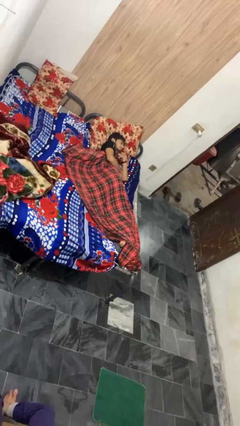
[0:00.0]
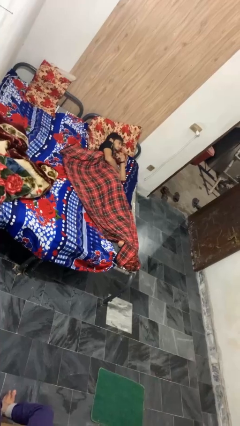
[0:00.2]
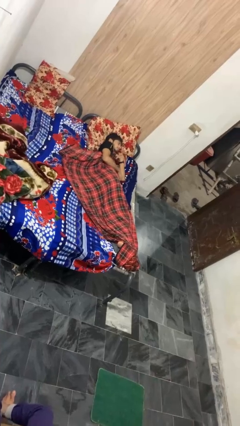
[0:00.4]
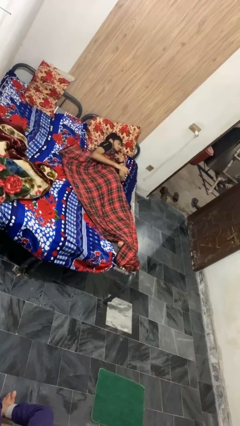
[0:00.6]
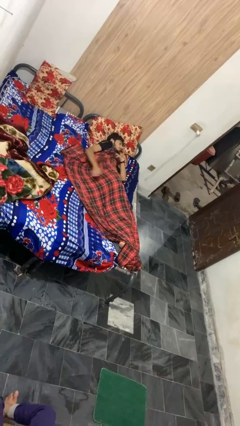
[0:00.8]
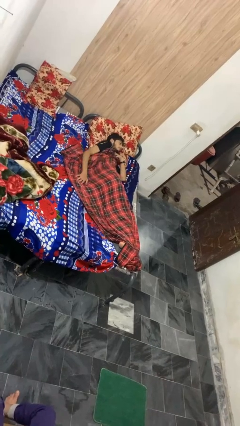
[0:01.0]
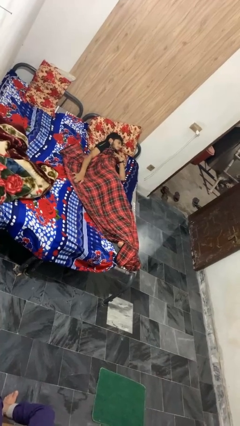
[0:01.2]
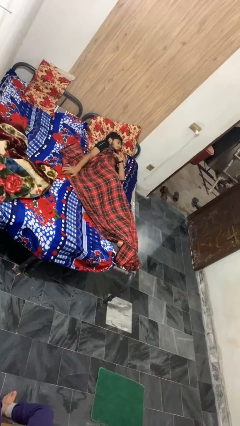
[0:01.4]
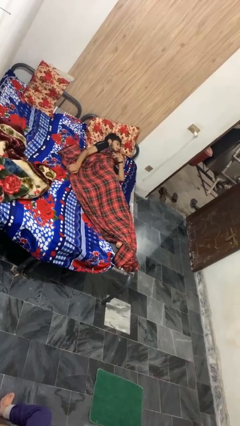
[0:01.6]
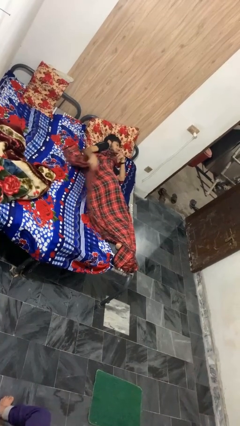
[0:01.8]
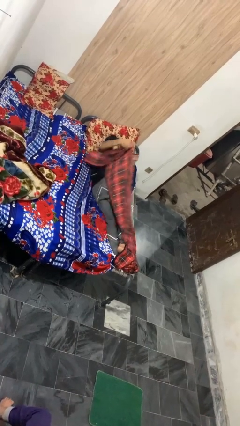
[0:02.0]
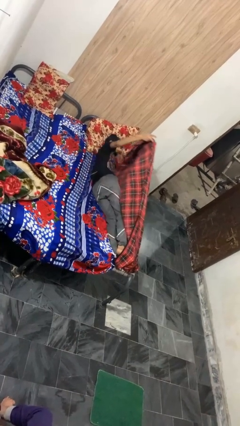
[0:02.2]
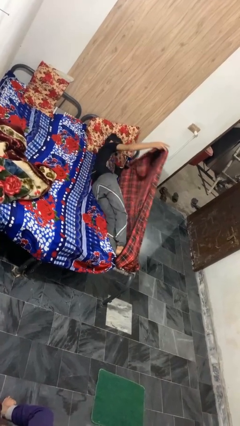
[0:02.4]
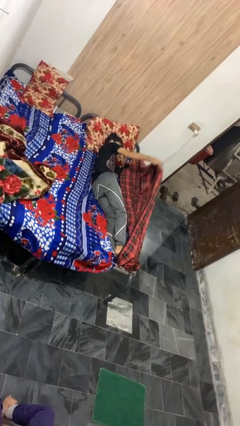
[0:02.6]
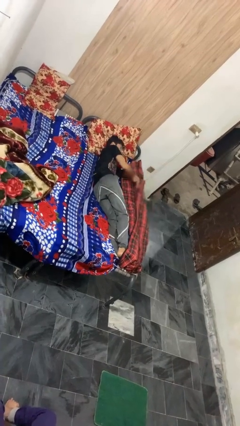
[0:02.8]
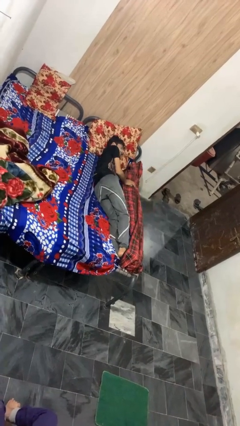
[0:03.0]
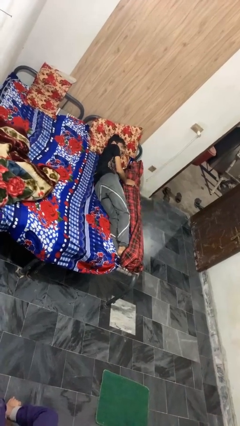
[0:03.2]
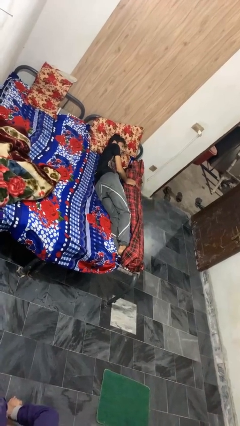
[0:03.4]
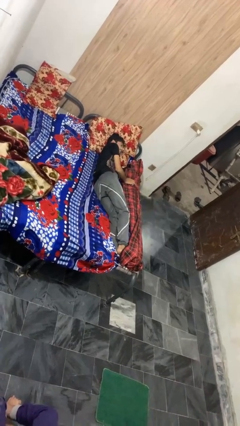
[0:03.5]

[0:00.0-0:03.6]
person uncovers with blanket

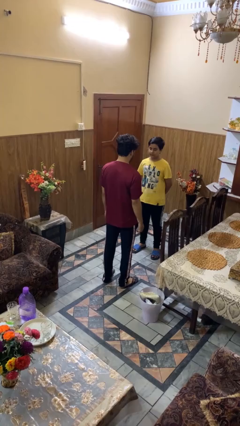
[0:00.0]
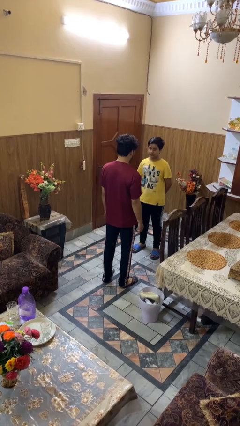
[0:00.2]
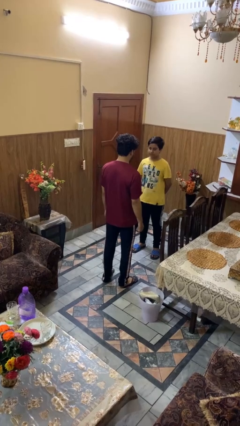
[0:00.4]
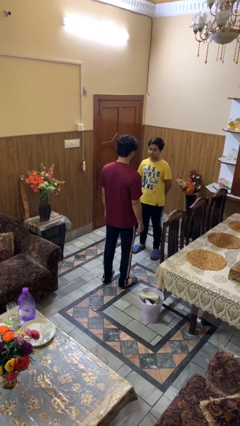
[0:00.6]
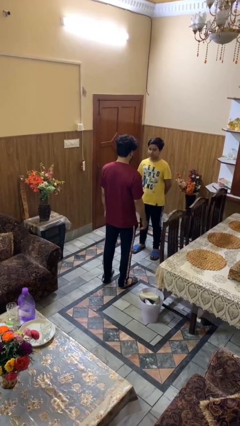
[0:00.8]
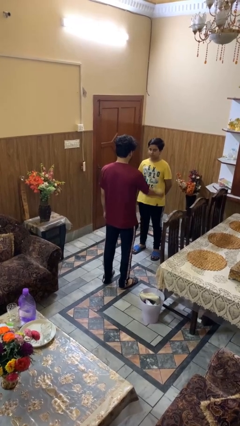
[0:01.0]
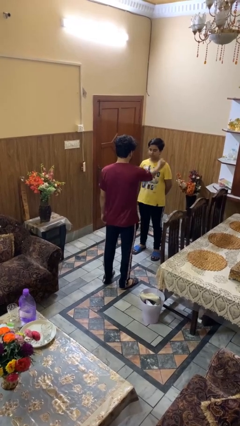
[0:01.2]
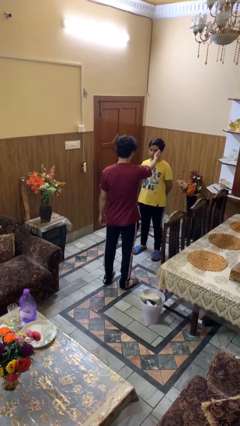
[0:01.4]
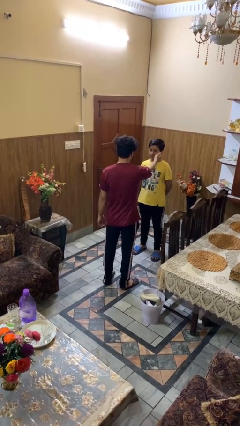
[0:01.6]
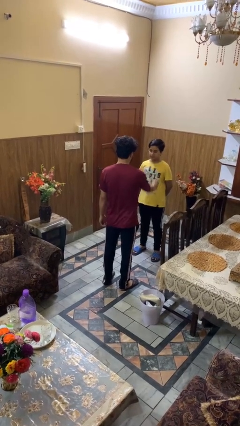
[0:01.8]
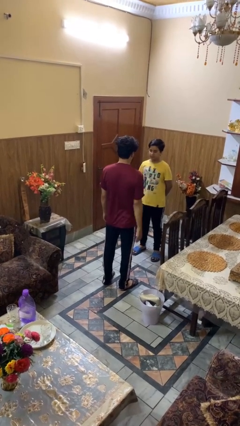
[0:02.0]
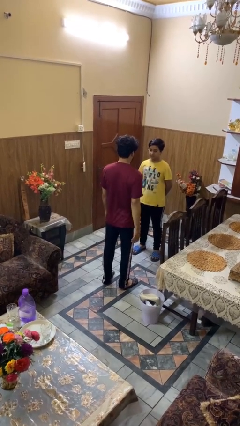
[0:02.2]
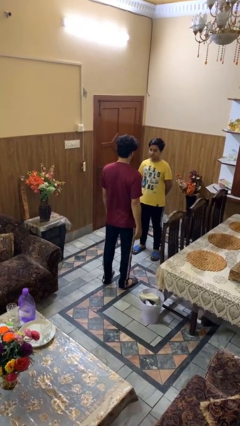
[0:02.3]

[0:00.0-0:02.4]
person touches face of person

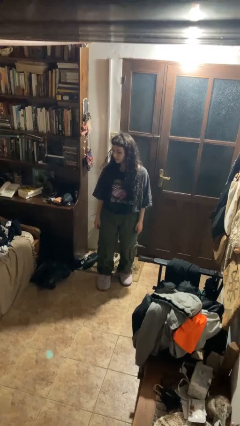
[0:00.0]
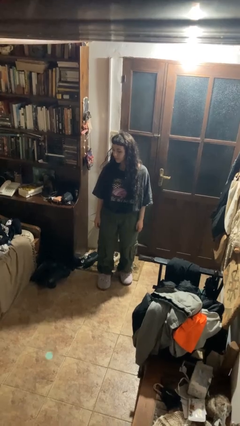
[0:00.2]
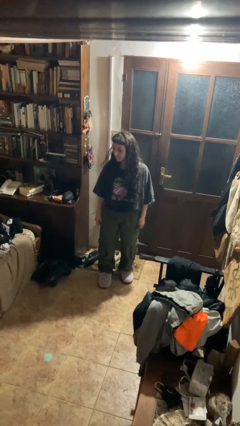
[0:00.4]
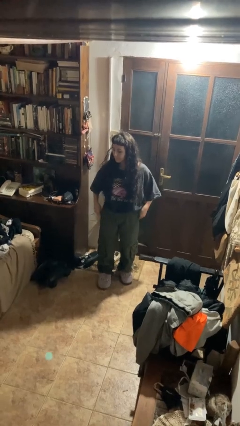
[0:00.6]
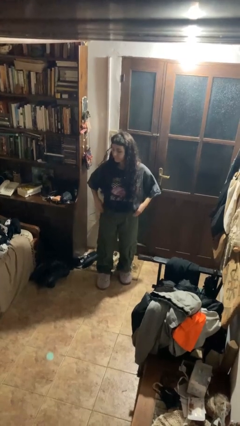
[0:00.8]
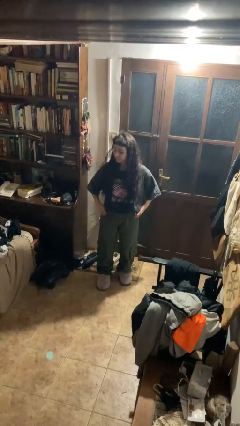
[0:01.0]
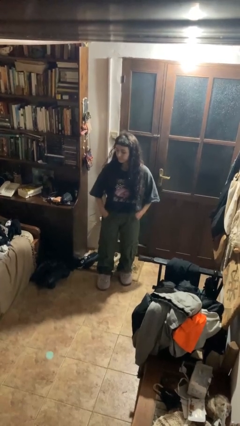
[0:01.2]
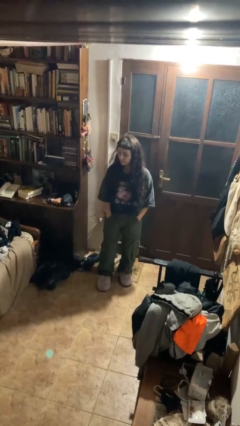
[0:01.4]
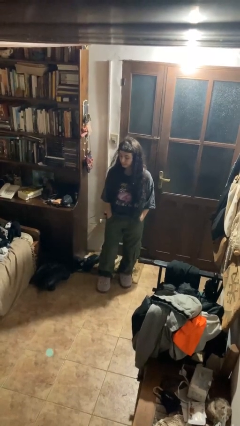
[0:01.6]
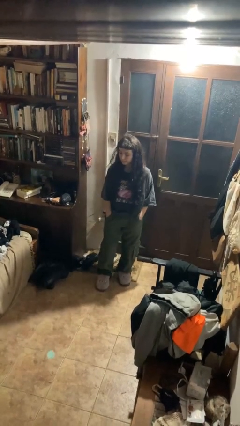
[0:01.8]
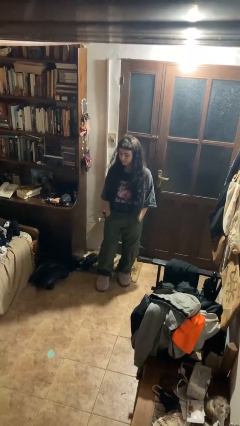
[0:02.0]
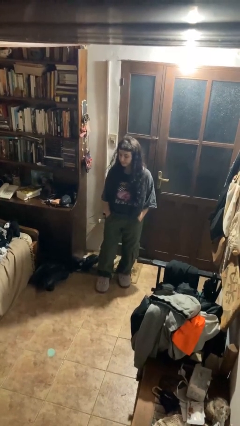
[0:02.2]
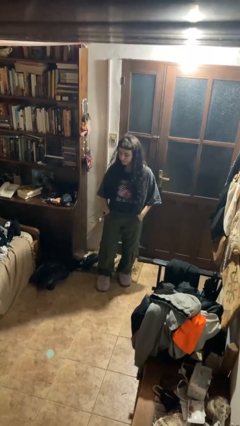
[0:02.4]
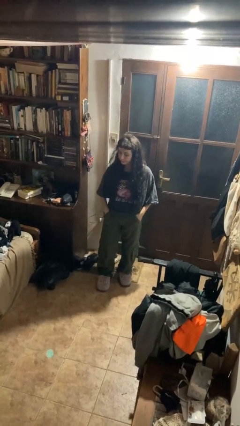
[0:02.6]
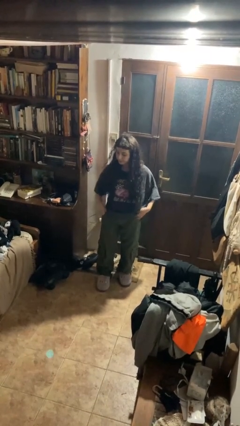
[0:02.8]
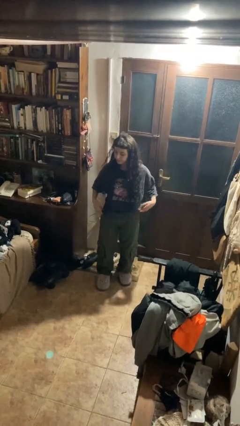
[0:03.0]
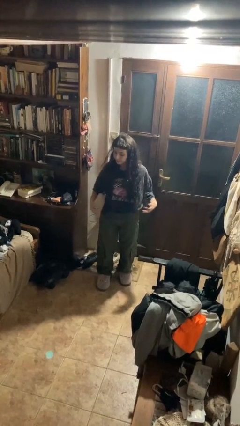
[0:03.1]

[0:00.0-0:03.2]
person puts hands in back pockets

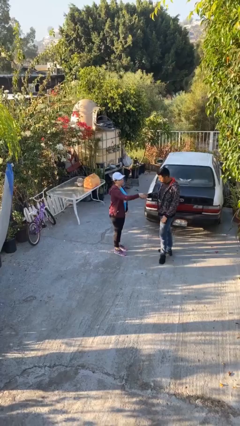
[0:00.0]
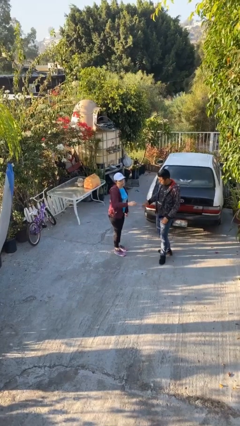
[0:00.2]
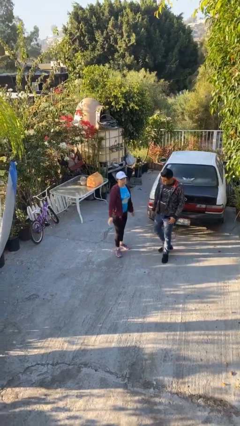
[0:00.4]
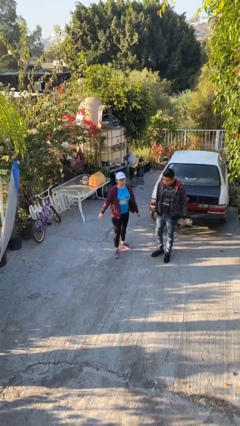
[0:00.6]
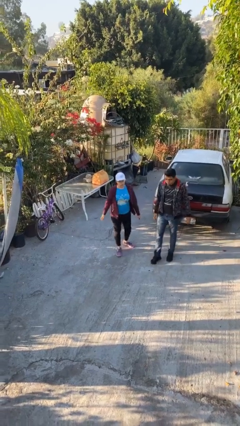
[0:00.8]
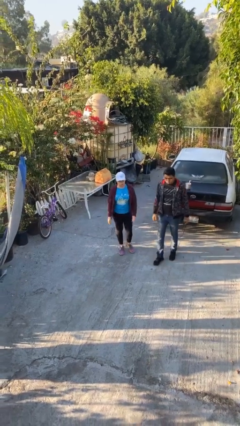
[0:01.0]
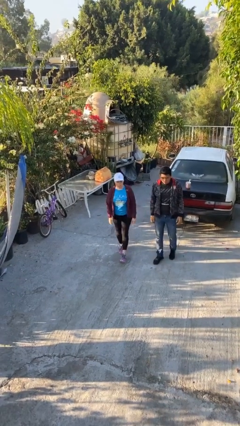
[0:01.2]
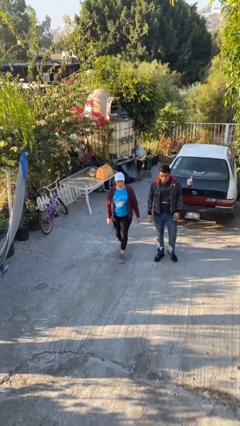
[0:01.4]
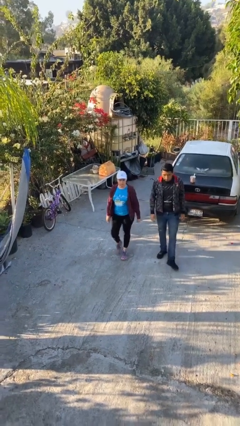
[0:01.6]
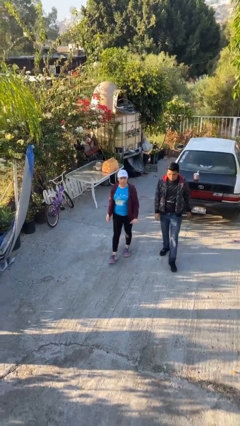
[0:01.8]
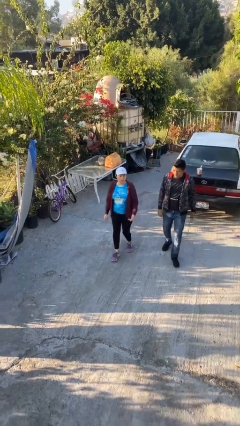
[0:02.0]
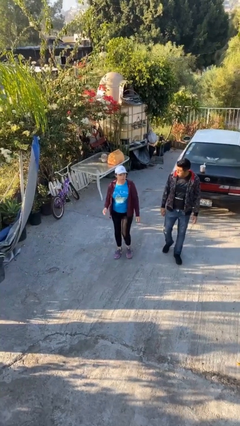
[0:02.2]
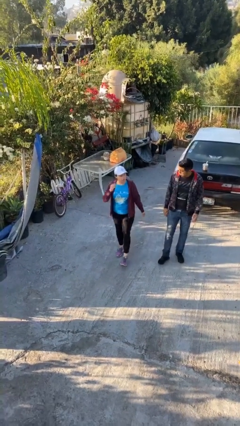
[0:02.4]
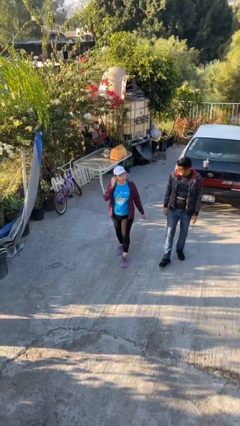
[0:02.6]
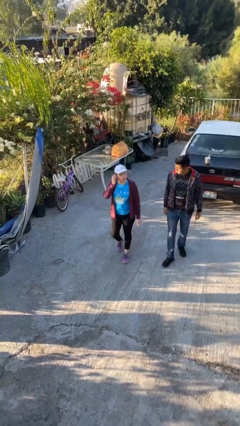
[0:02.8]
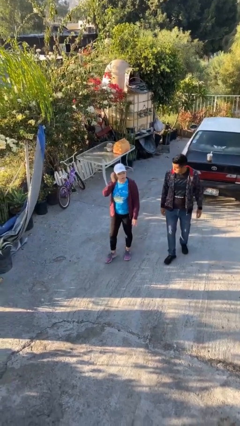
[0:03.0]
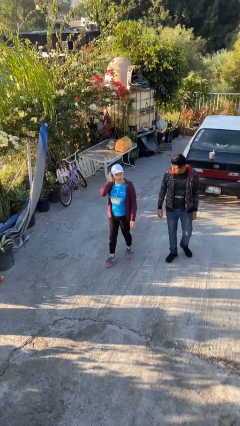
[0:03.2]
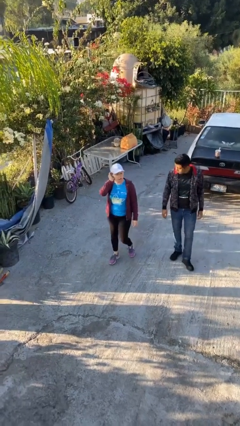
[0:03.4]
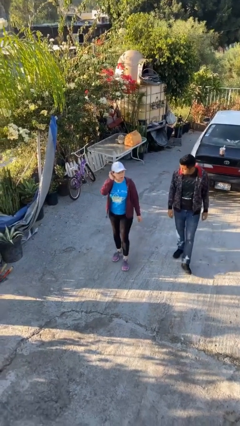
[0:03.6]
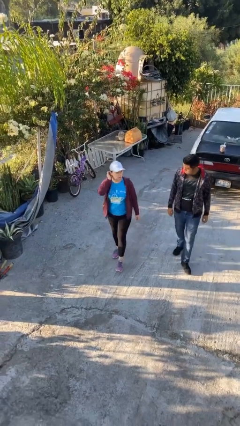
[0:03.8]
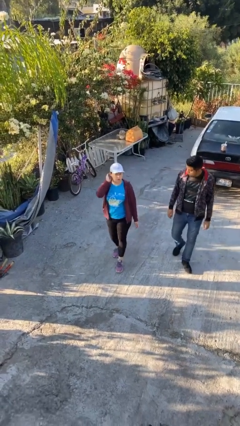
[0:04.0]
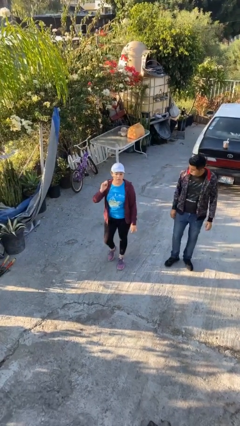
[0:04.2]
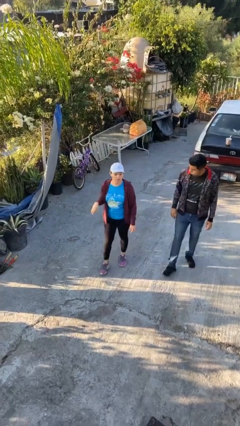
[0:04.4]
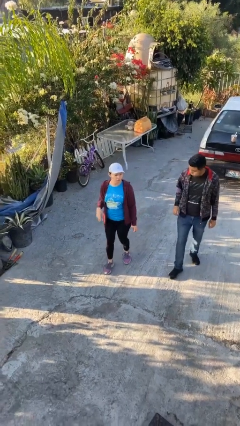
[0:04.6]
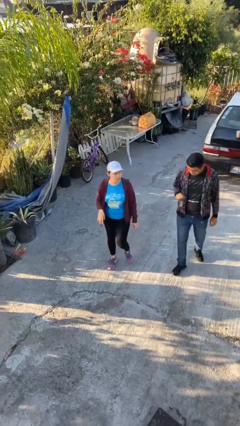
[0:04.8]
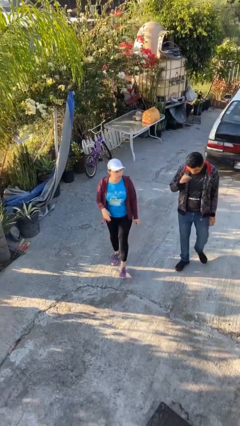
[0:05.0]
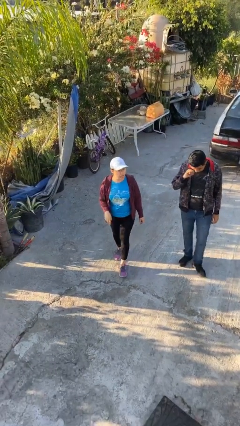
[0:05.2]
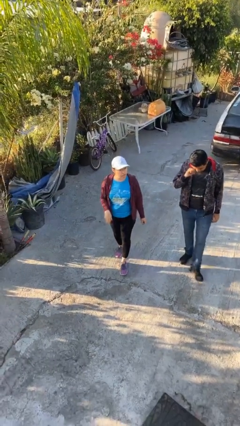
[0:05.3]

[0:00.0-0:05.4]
person talks to person

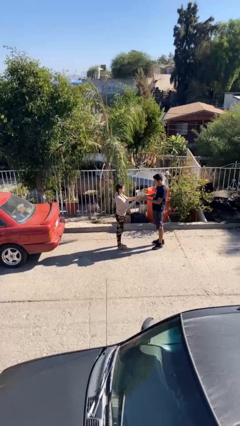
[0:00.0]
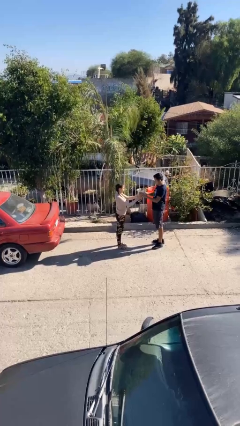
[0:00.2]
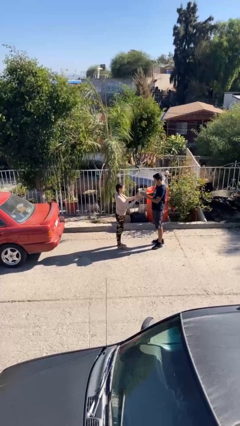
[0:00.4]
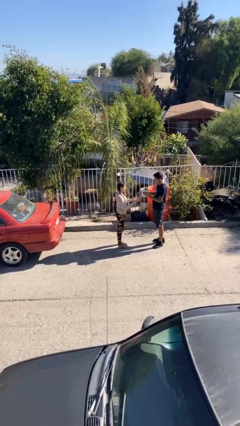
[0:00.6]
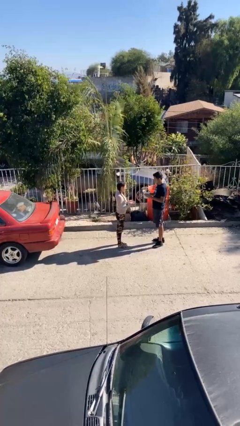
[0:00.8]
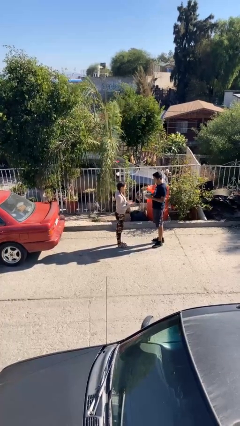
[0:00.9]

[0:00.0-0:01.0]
person transfers object to person

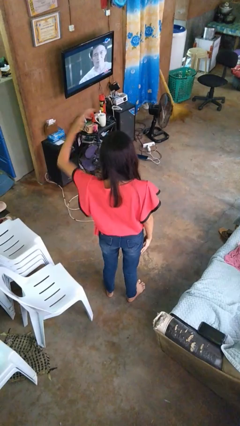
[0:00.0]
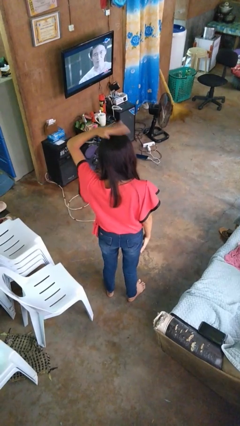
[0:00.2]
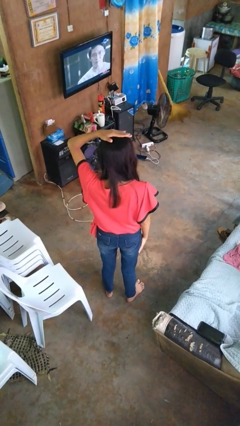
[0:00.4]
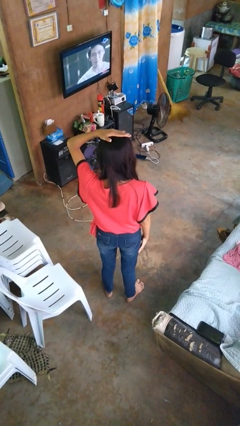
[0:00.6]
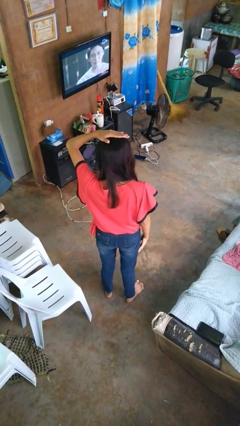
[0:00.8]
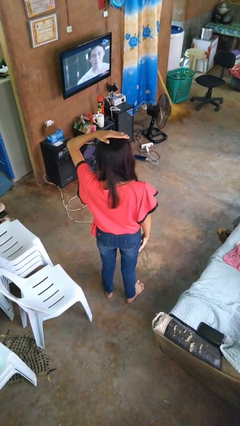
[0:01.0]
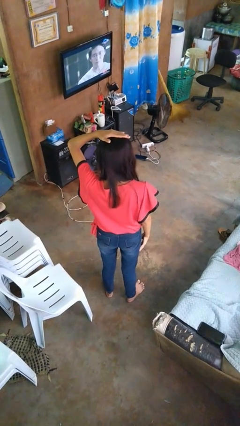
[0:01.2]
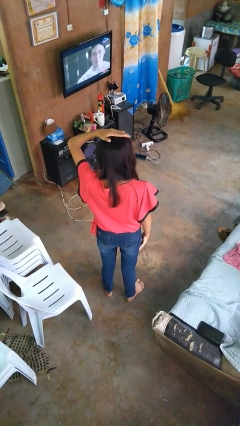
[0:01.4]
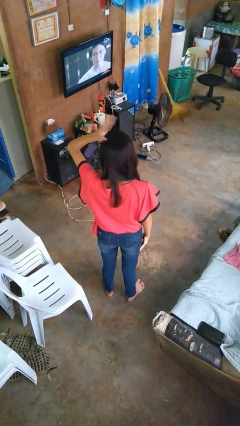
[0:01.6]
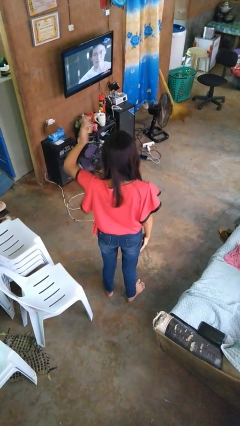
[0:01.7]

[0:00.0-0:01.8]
person pats head
